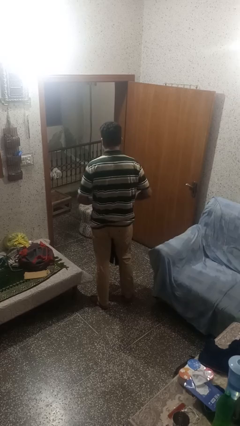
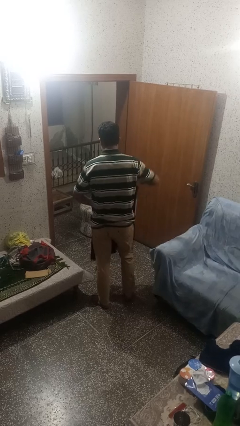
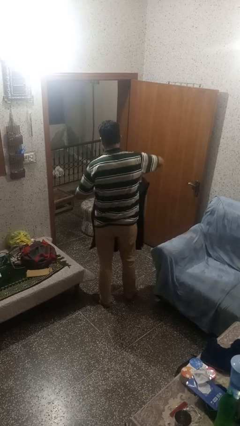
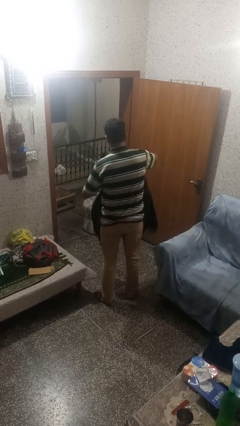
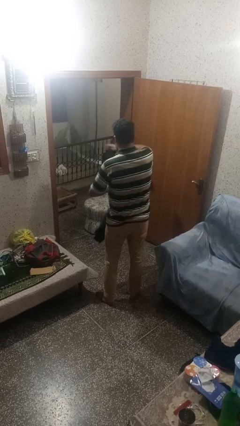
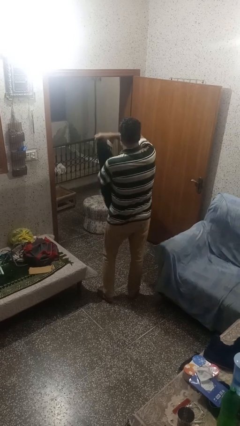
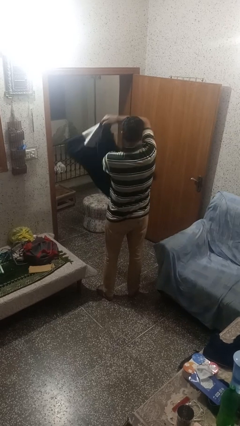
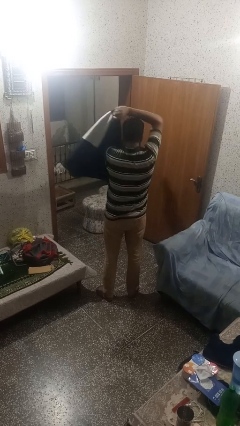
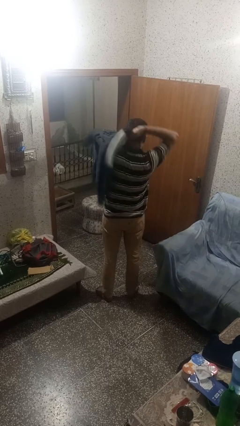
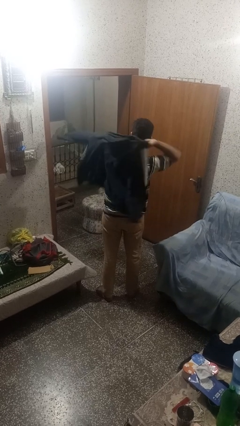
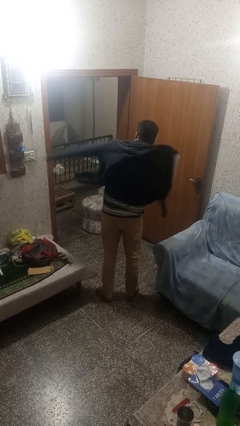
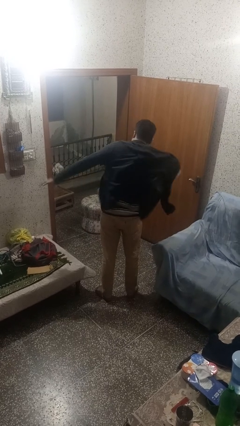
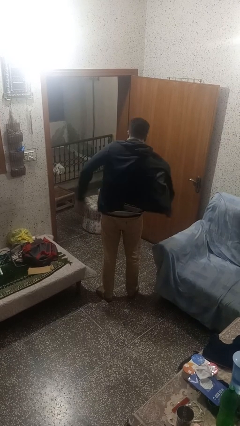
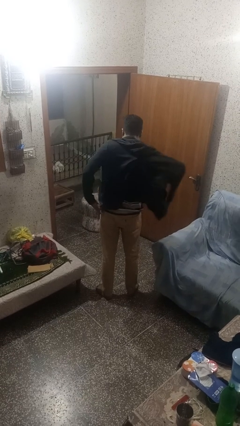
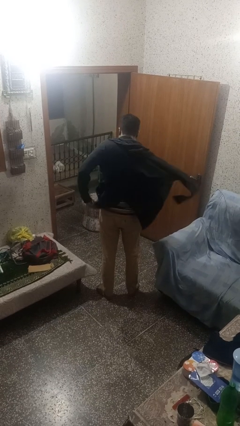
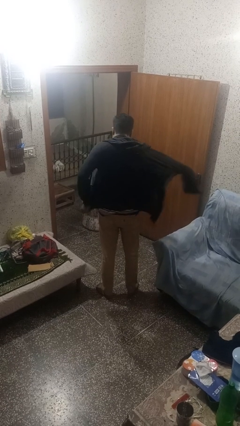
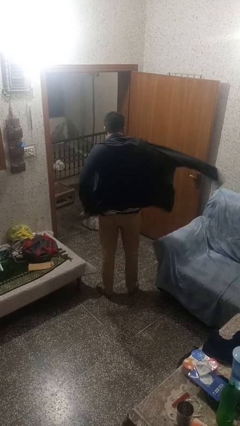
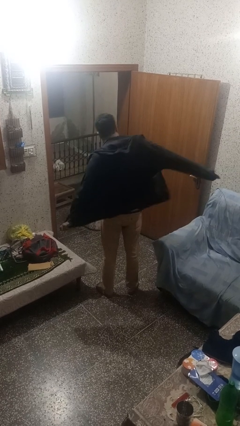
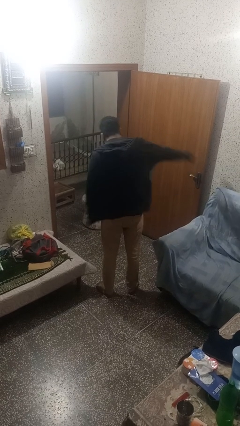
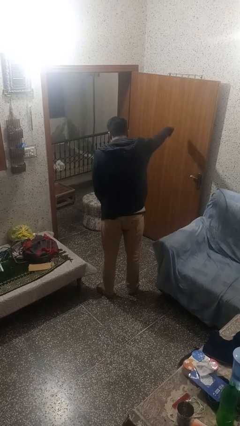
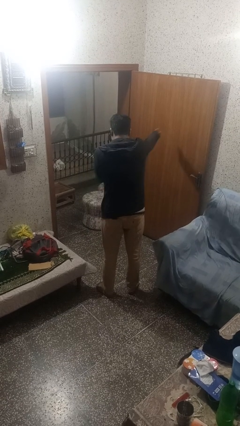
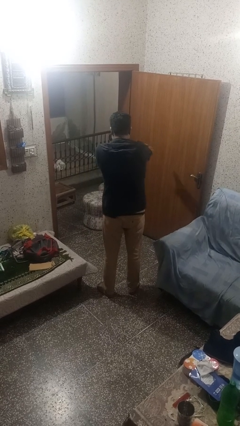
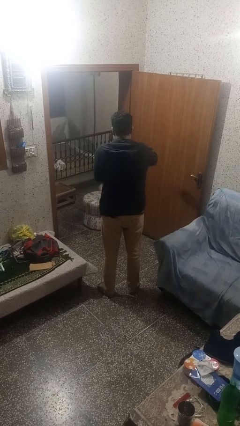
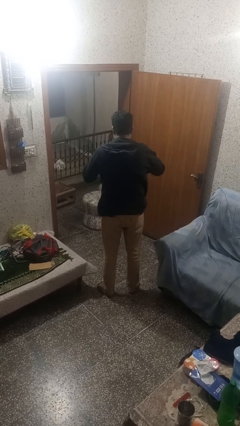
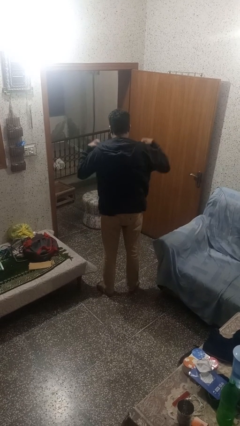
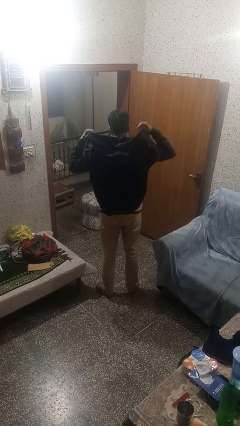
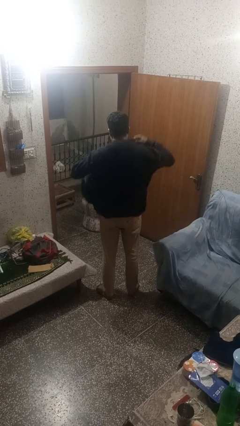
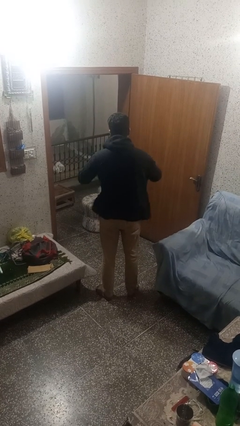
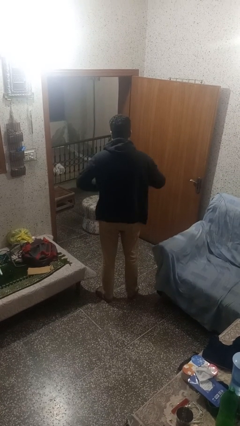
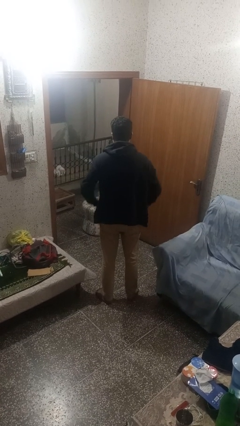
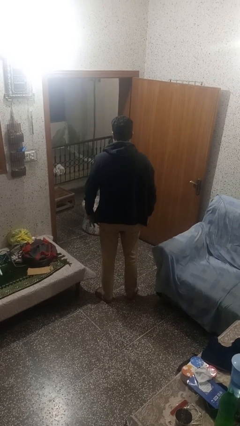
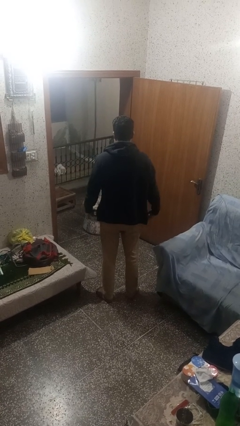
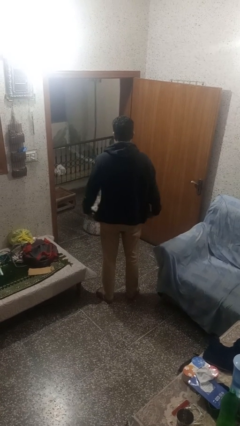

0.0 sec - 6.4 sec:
person puts on jacket

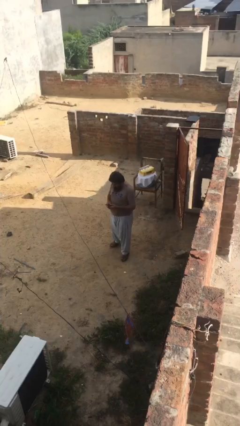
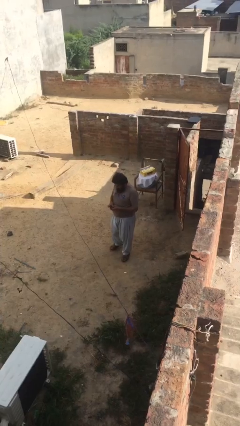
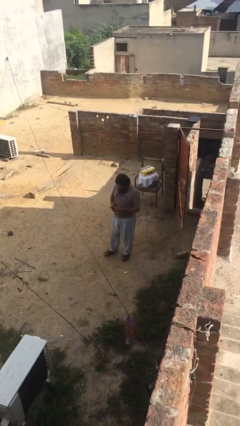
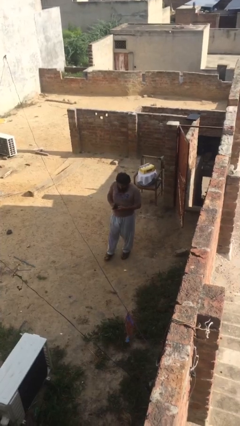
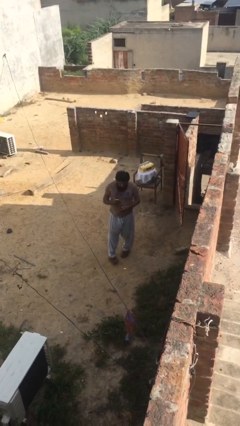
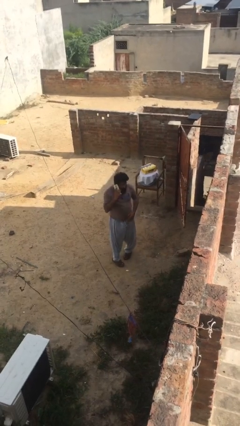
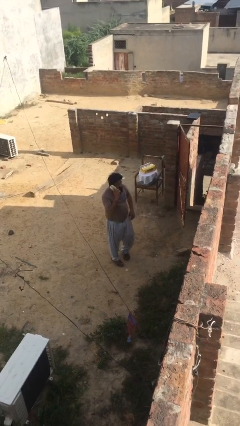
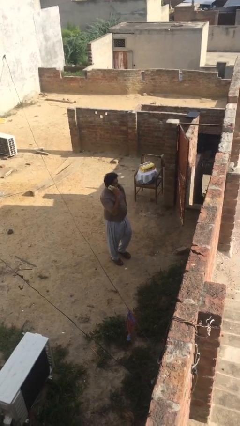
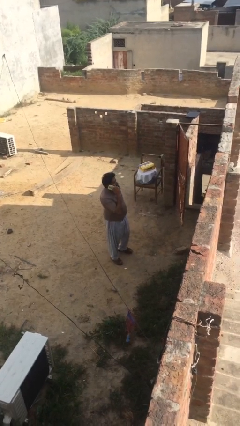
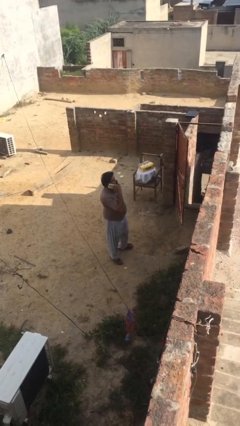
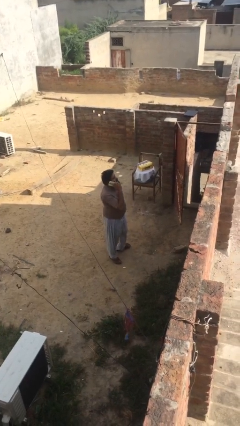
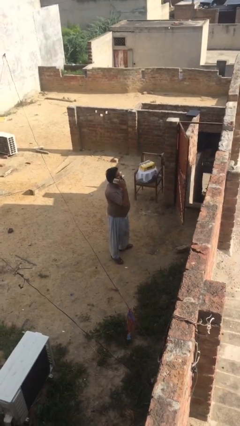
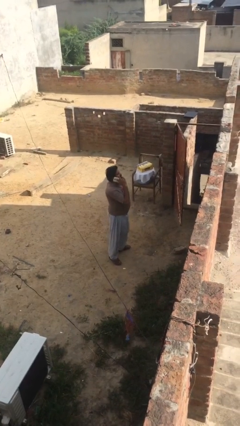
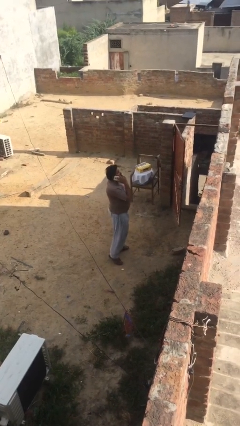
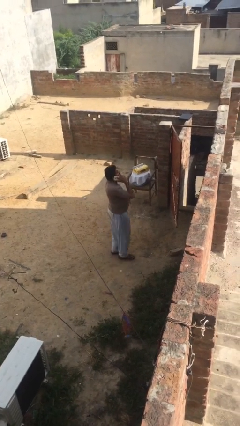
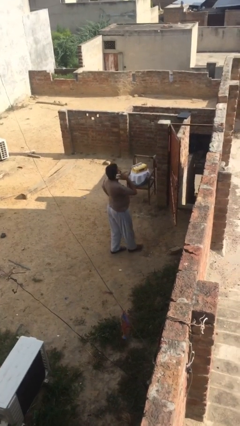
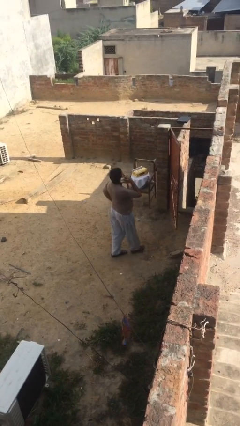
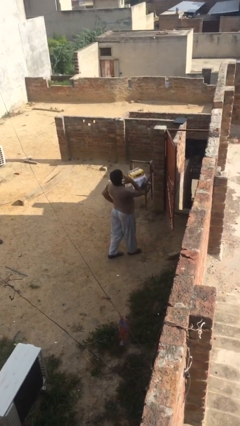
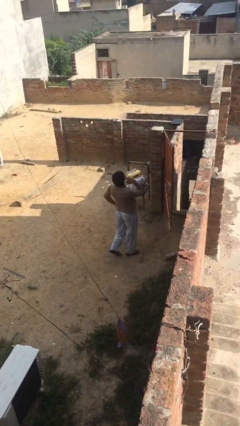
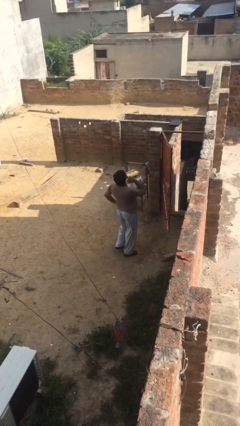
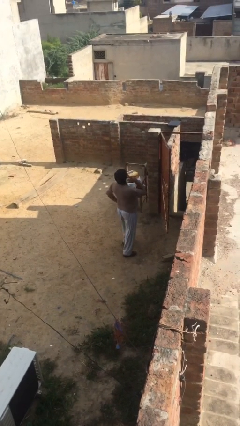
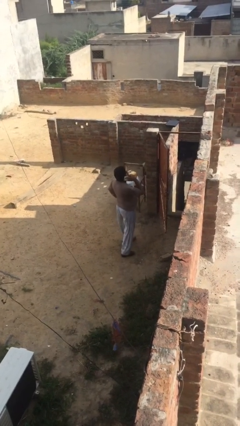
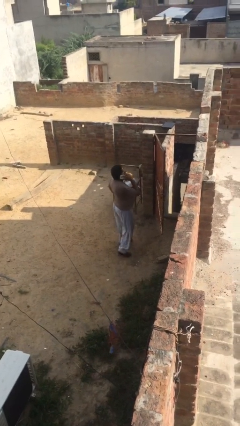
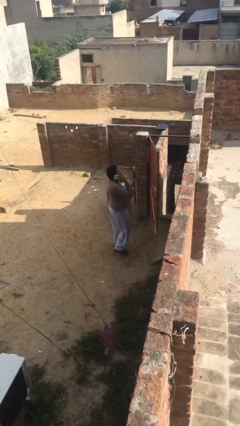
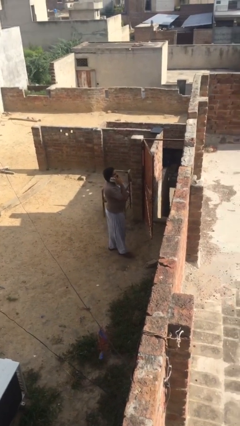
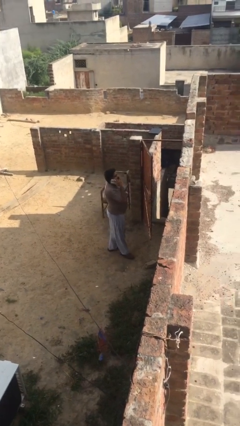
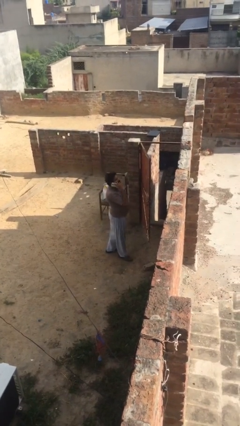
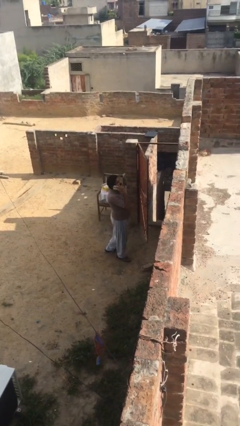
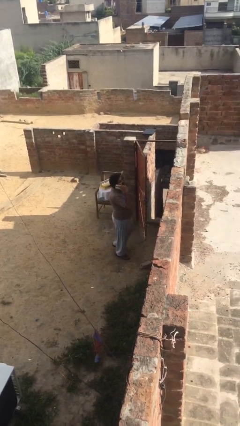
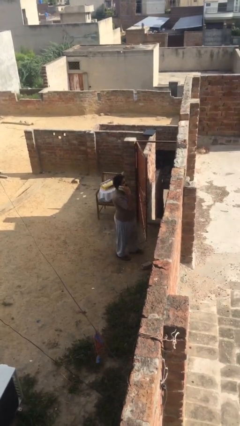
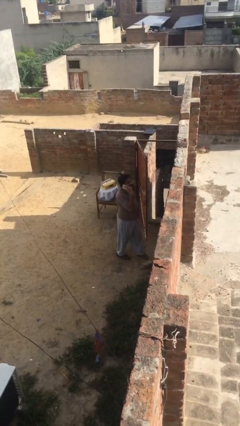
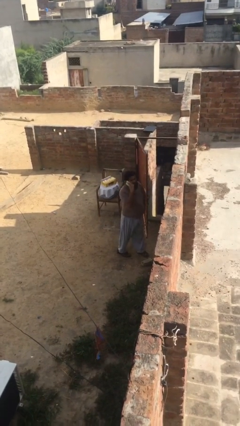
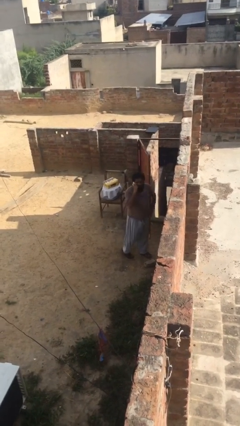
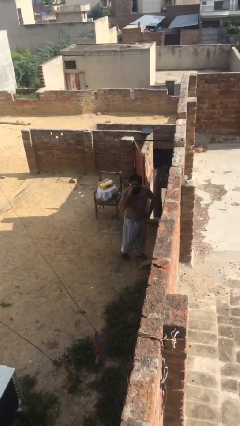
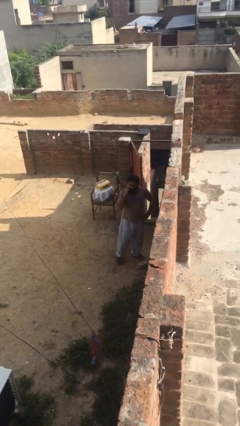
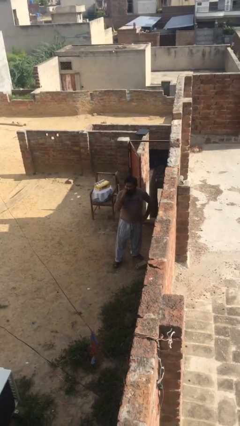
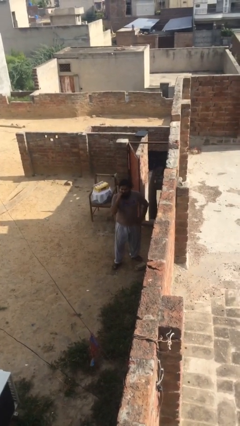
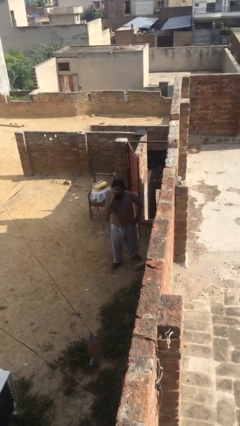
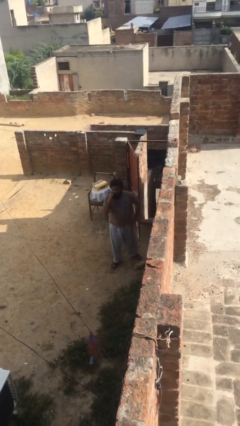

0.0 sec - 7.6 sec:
person talks on phone

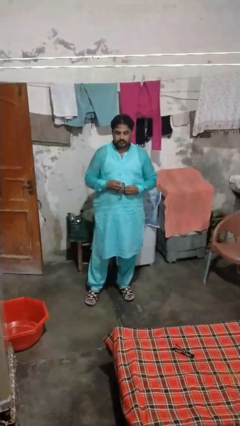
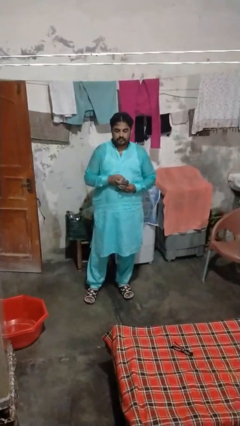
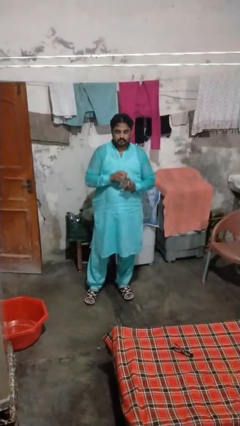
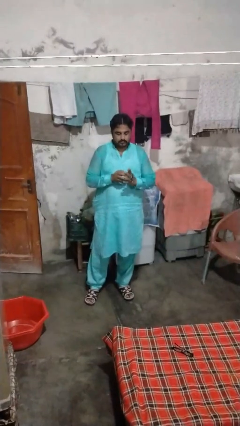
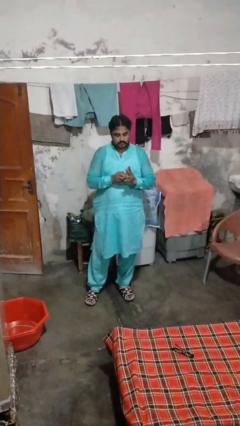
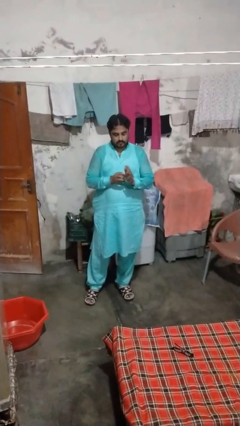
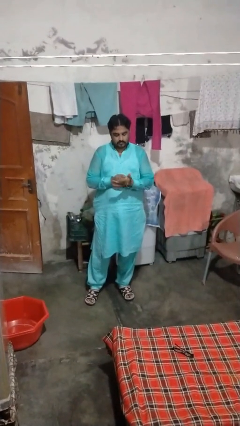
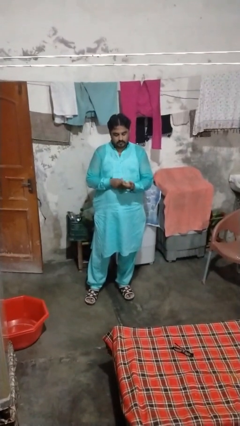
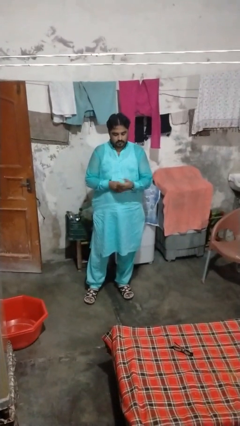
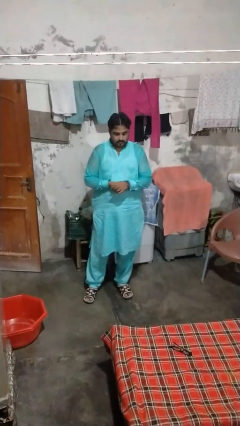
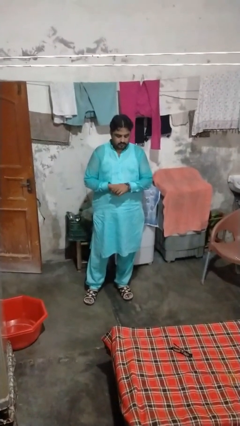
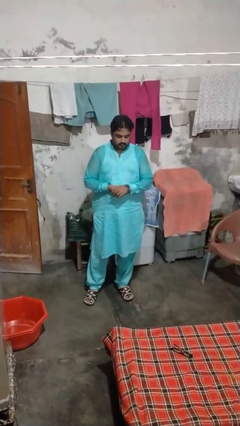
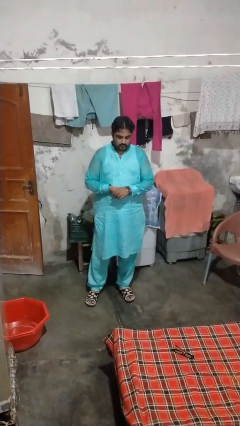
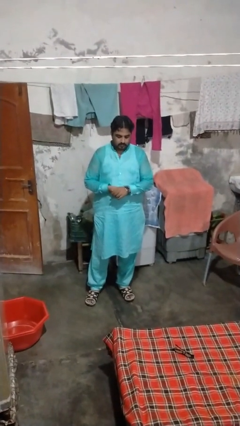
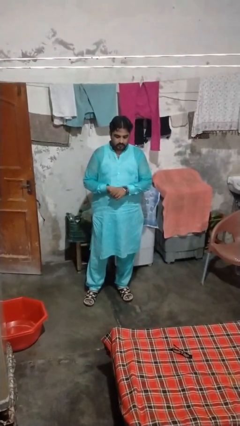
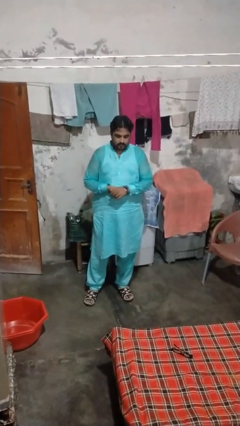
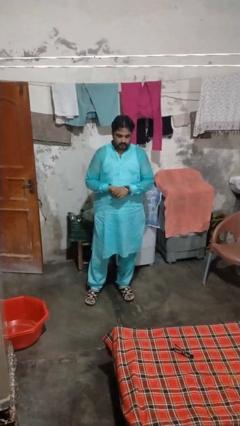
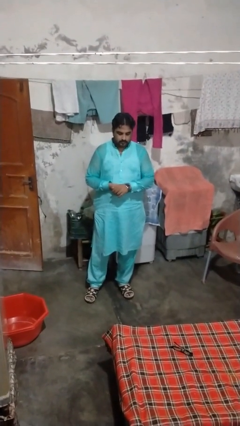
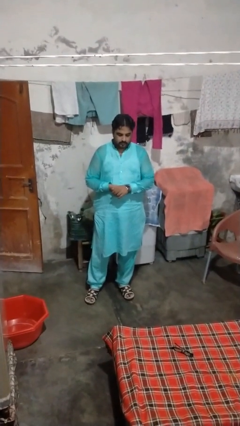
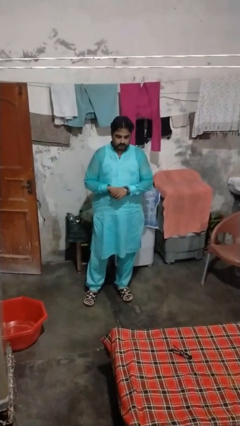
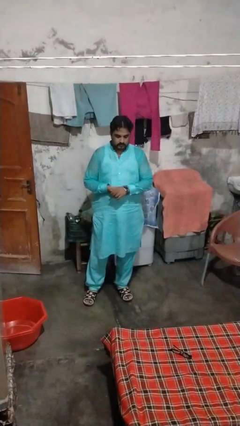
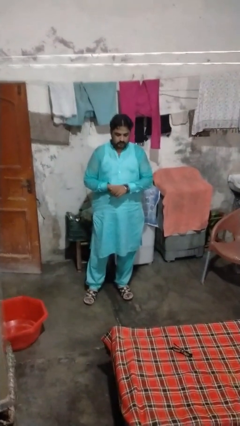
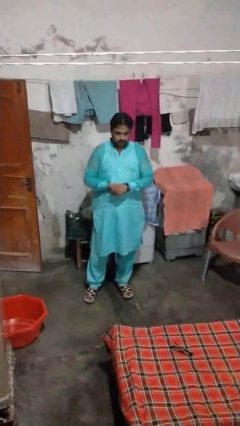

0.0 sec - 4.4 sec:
person puts on wristwatch
